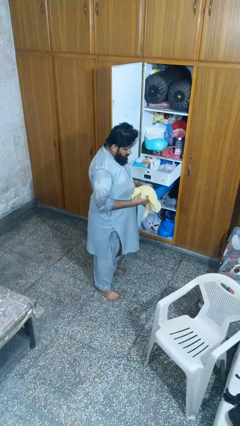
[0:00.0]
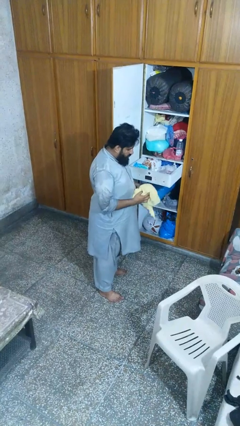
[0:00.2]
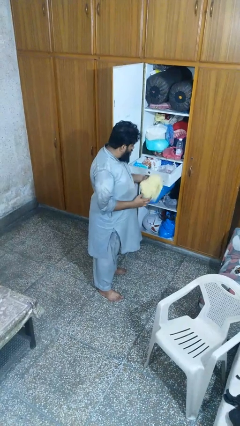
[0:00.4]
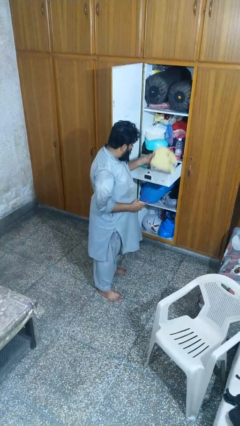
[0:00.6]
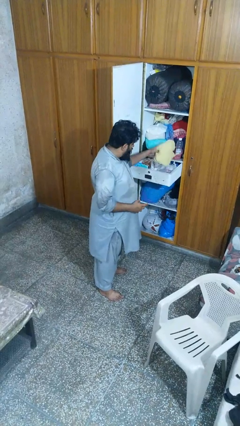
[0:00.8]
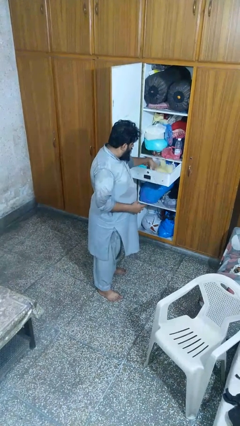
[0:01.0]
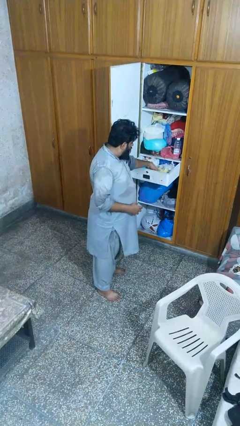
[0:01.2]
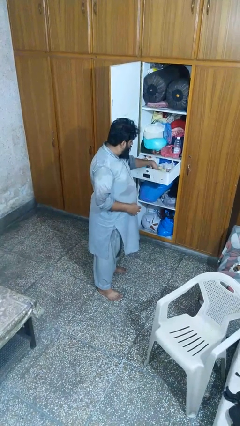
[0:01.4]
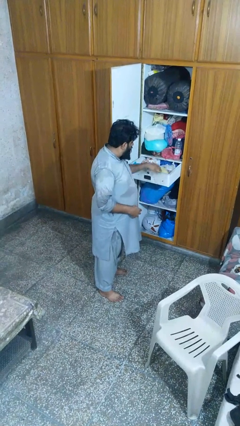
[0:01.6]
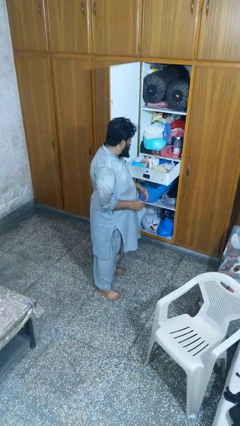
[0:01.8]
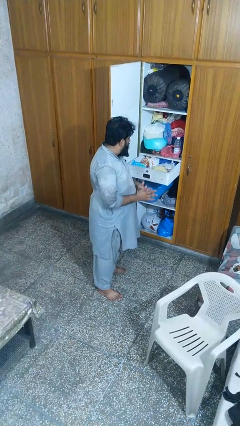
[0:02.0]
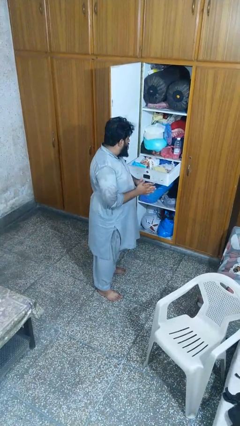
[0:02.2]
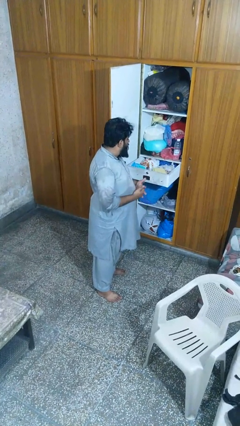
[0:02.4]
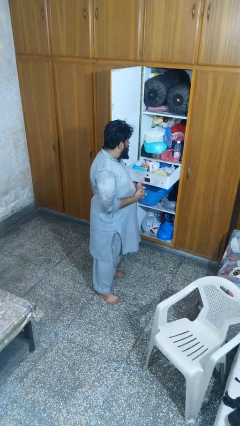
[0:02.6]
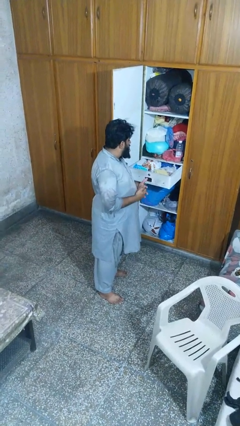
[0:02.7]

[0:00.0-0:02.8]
person puts clothes into dresser

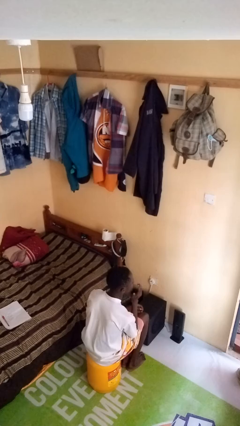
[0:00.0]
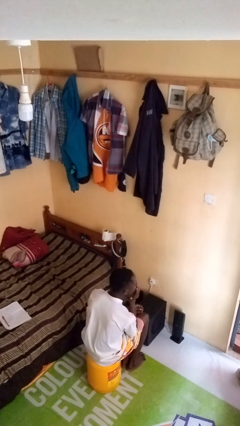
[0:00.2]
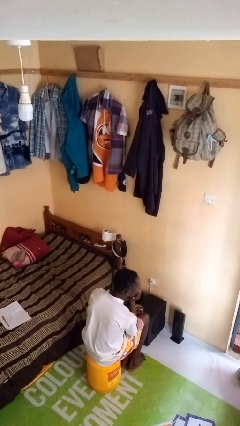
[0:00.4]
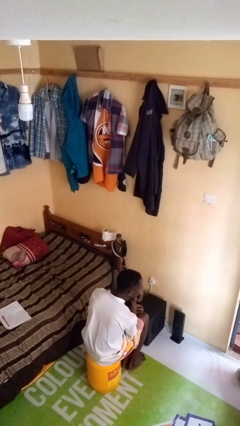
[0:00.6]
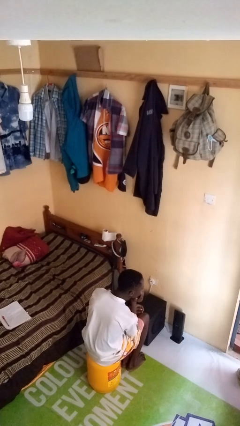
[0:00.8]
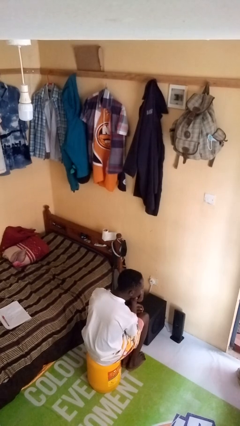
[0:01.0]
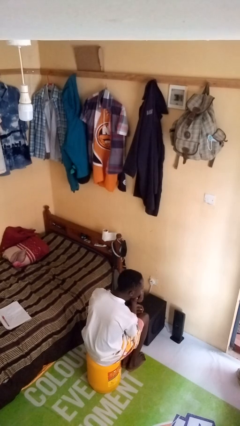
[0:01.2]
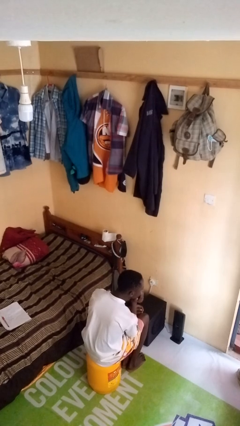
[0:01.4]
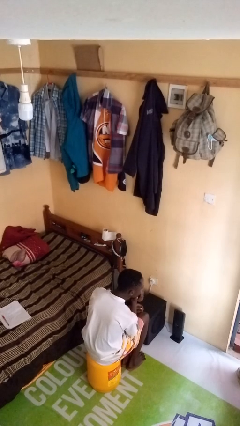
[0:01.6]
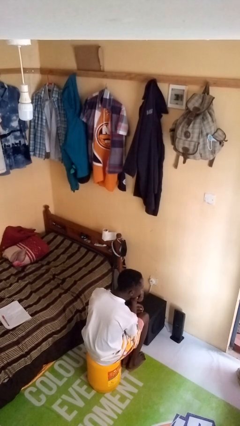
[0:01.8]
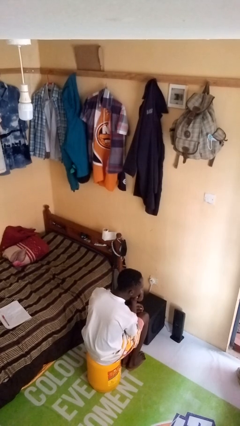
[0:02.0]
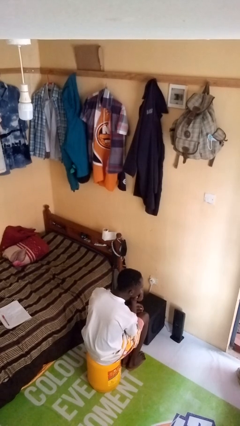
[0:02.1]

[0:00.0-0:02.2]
person strokes chin

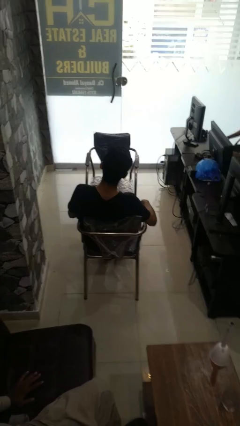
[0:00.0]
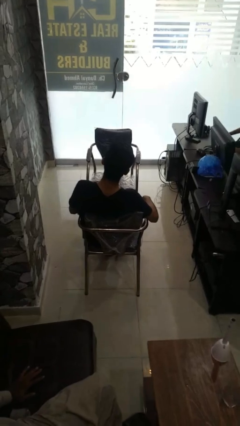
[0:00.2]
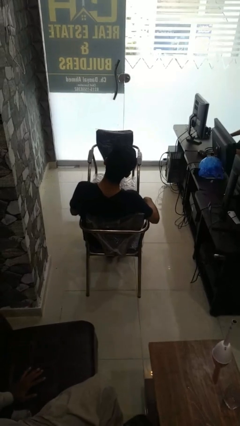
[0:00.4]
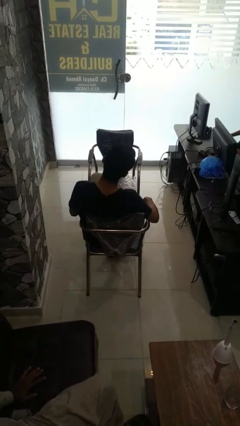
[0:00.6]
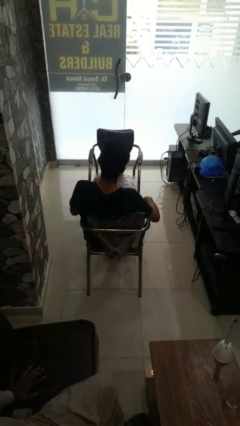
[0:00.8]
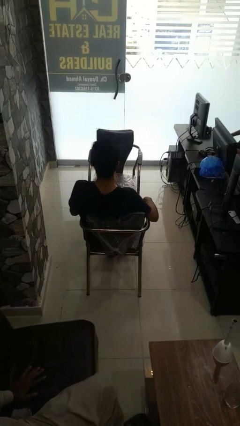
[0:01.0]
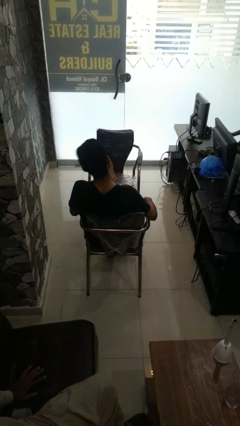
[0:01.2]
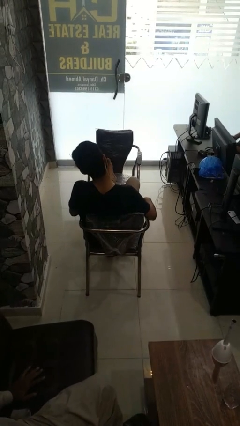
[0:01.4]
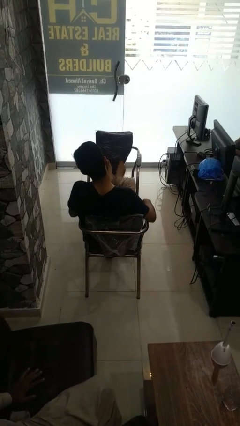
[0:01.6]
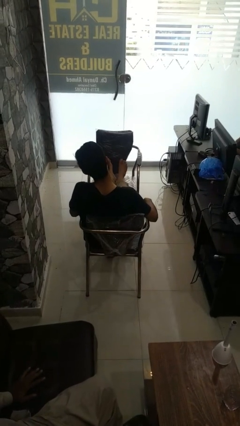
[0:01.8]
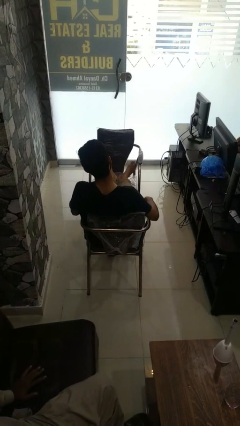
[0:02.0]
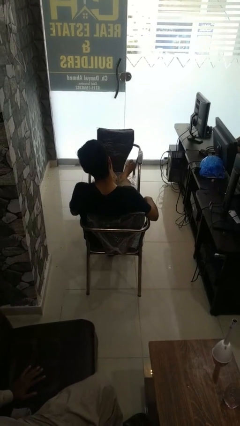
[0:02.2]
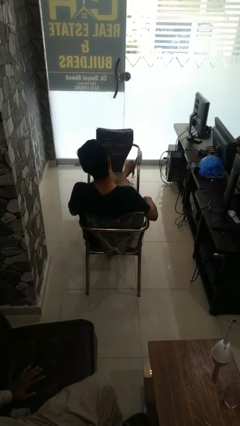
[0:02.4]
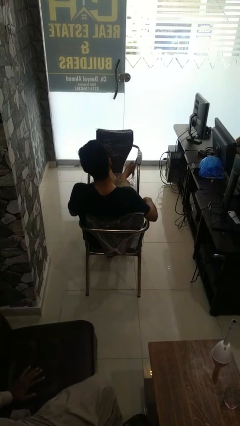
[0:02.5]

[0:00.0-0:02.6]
person puts feet up

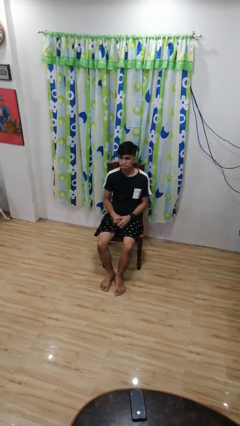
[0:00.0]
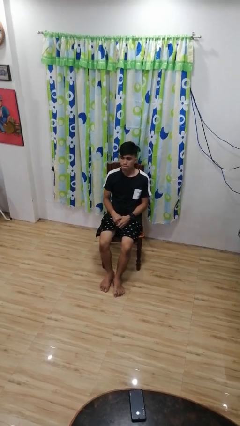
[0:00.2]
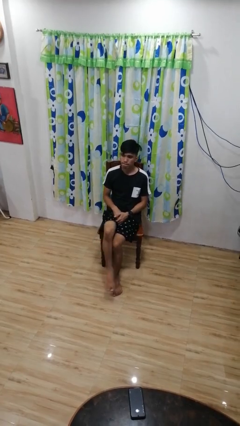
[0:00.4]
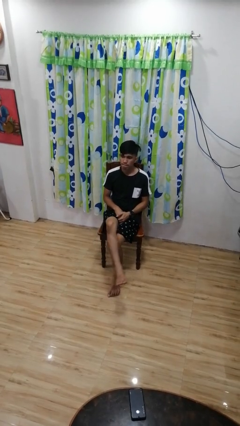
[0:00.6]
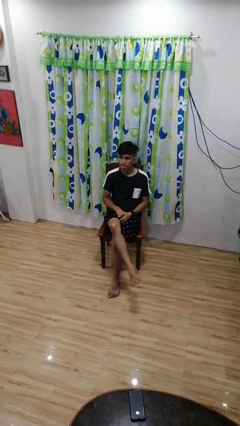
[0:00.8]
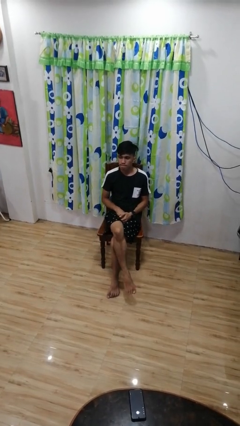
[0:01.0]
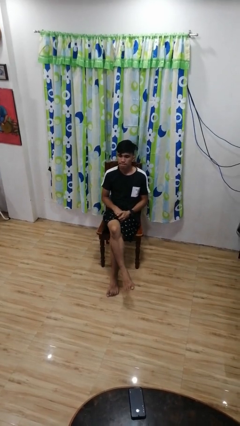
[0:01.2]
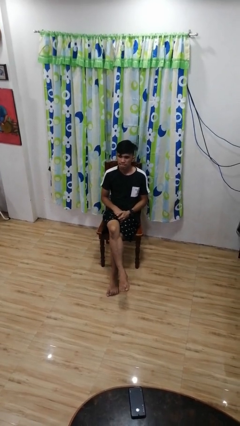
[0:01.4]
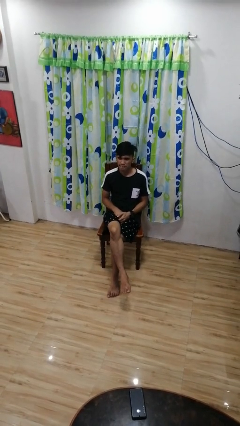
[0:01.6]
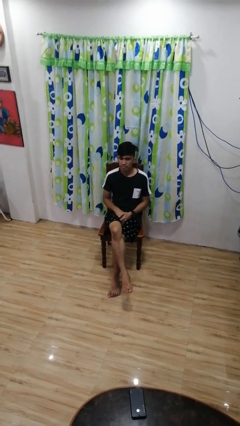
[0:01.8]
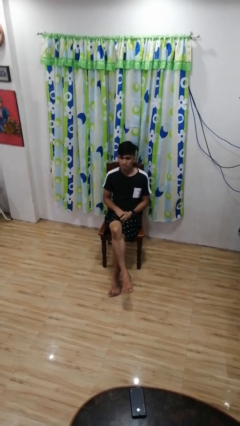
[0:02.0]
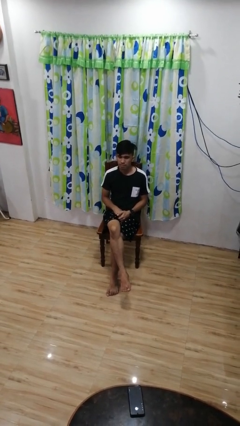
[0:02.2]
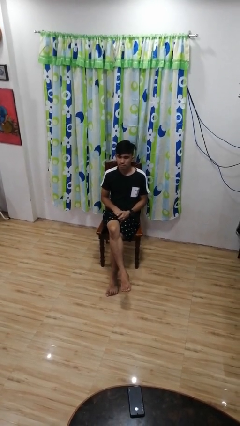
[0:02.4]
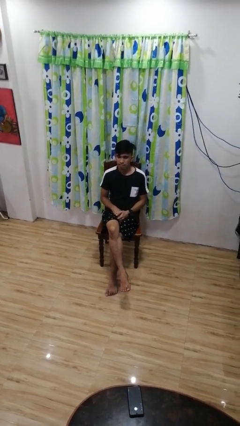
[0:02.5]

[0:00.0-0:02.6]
person crosses legs

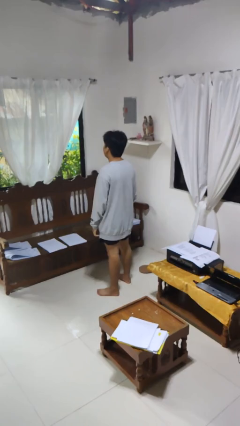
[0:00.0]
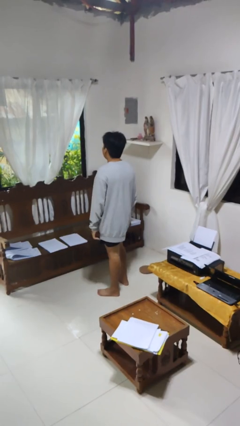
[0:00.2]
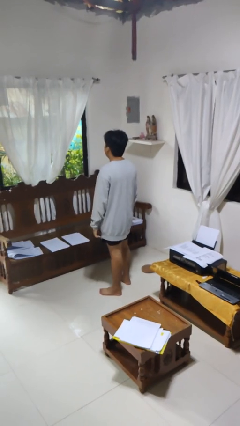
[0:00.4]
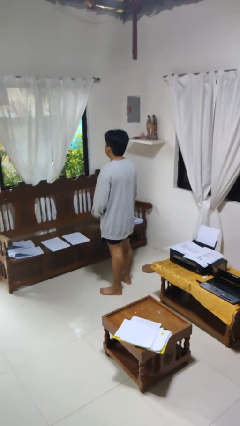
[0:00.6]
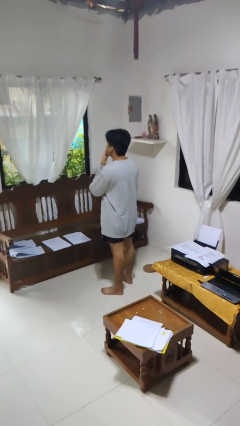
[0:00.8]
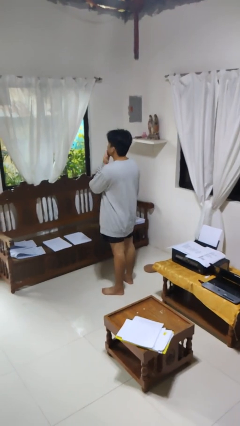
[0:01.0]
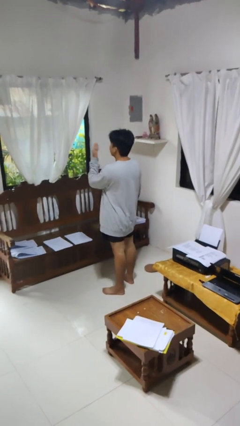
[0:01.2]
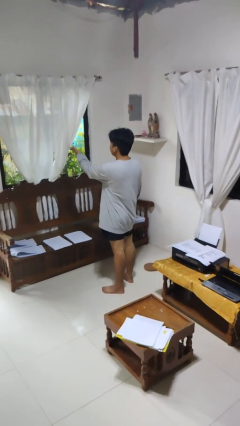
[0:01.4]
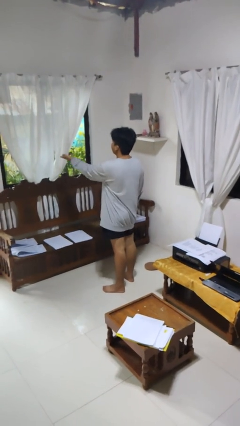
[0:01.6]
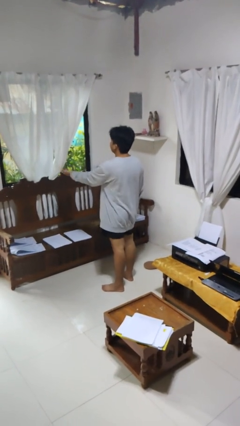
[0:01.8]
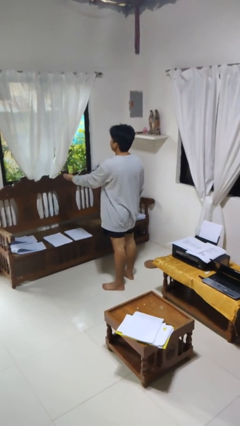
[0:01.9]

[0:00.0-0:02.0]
person gestures blow kiss

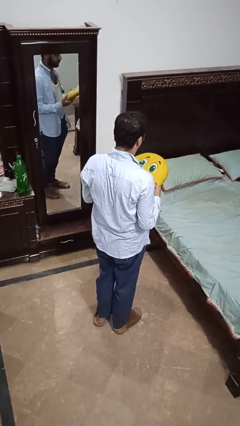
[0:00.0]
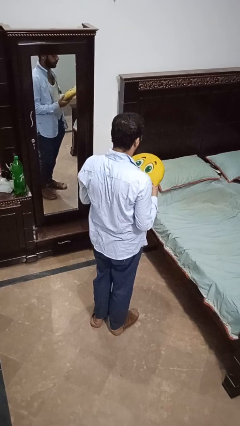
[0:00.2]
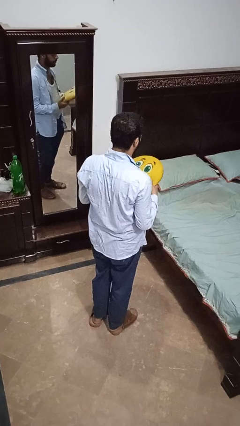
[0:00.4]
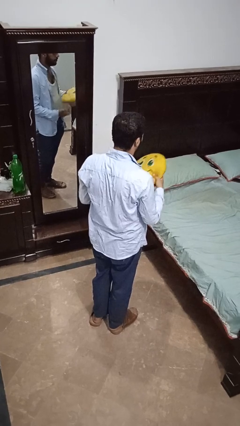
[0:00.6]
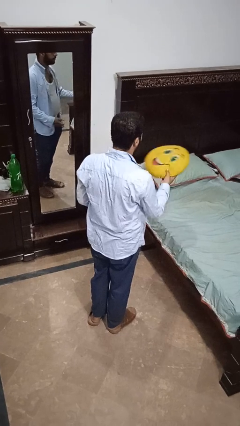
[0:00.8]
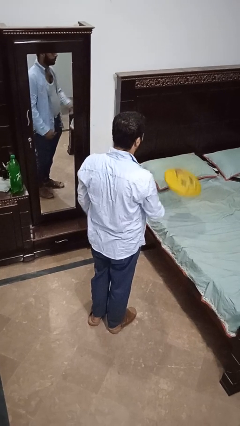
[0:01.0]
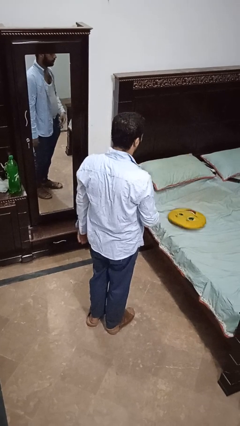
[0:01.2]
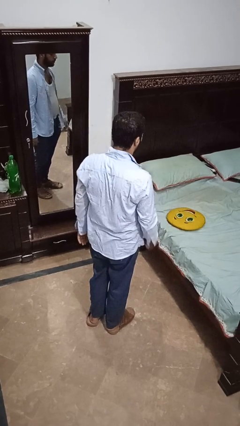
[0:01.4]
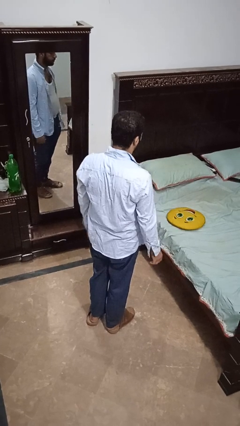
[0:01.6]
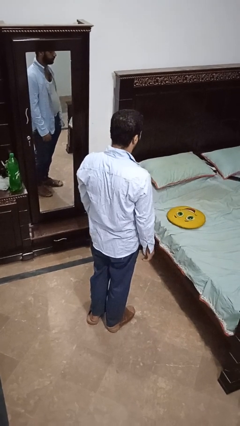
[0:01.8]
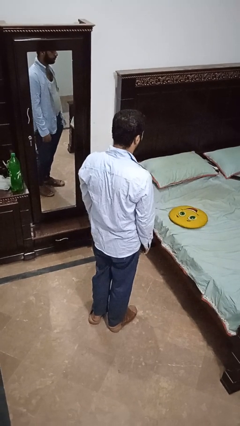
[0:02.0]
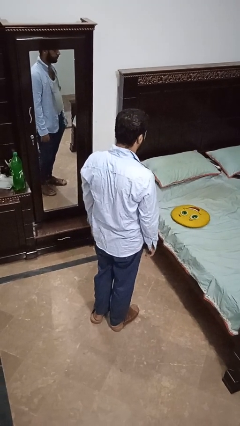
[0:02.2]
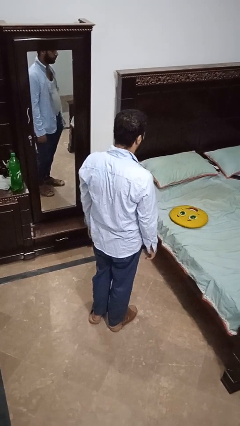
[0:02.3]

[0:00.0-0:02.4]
person throws object on bed

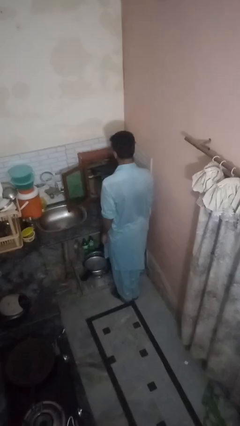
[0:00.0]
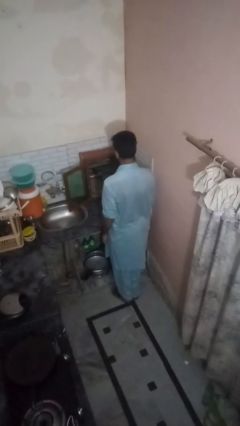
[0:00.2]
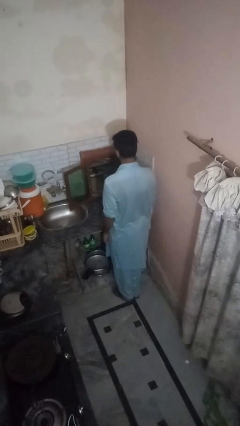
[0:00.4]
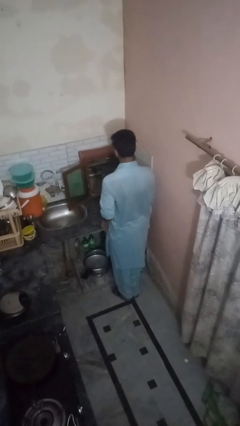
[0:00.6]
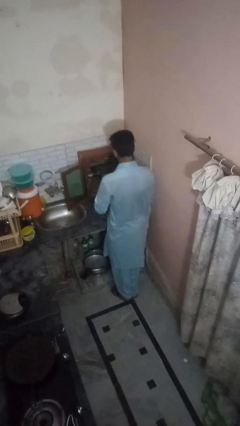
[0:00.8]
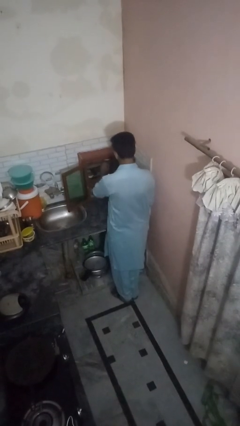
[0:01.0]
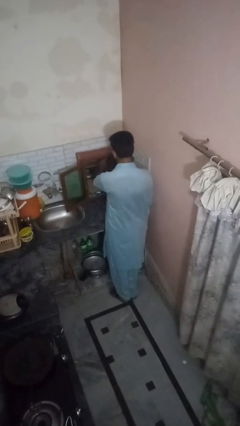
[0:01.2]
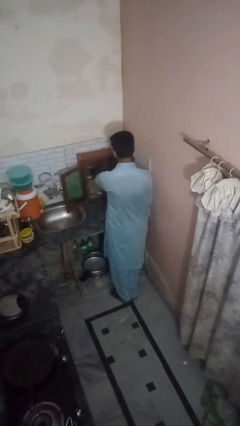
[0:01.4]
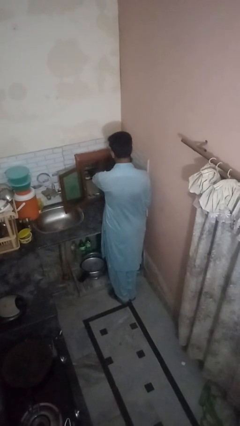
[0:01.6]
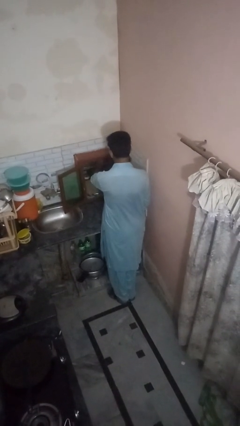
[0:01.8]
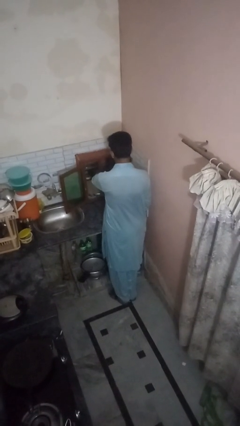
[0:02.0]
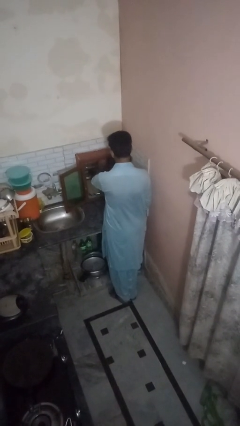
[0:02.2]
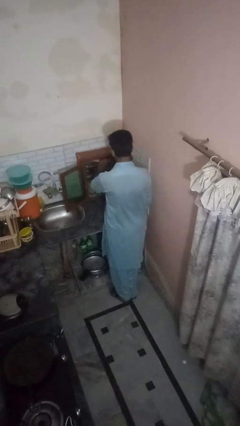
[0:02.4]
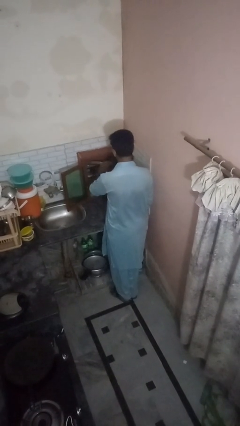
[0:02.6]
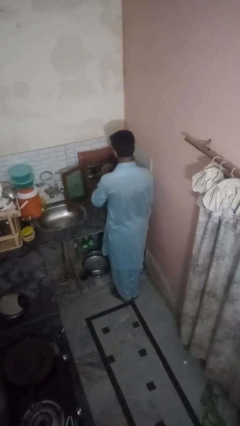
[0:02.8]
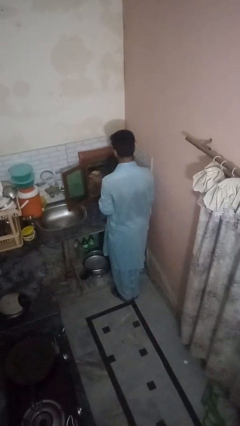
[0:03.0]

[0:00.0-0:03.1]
person takes object from kitchen drawer
